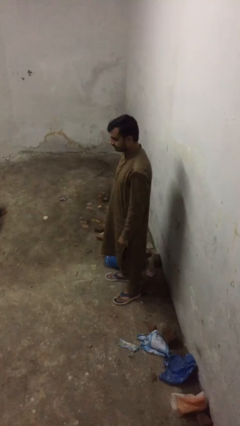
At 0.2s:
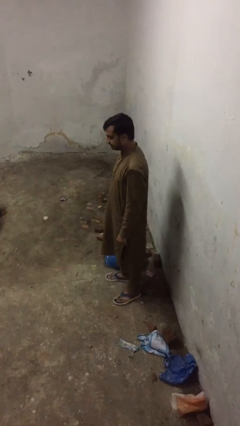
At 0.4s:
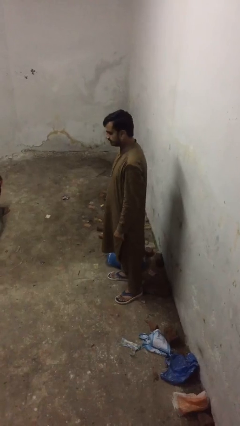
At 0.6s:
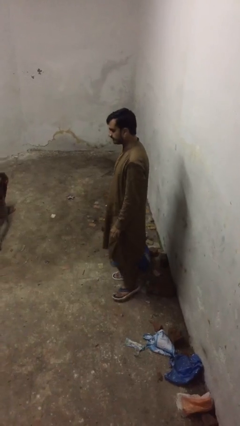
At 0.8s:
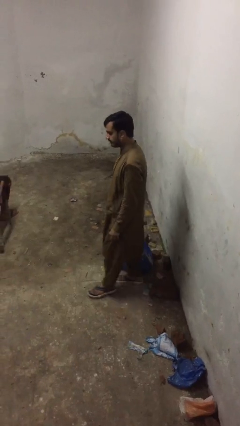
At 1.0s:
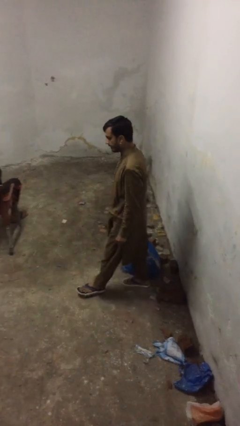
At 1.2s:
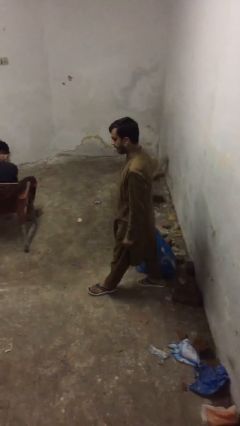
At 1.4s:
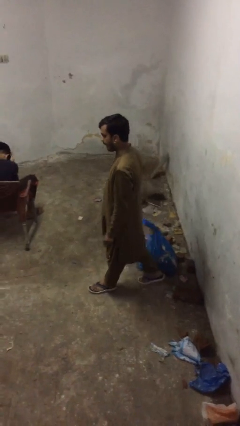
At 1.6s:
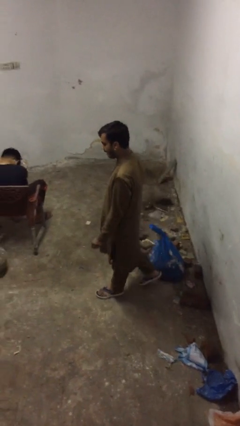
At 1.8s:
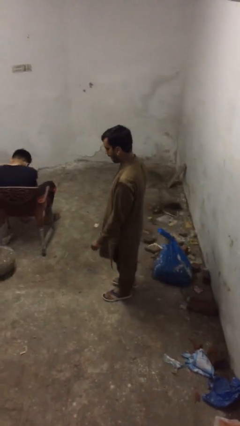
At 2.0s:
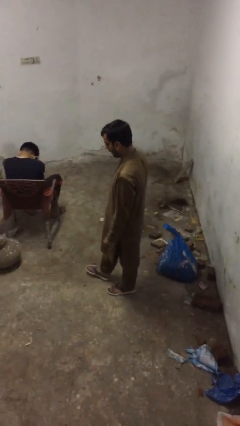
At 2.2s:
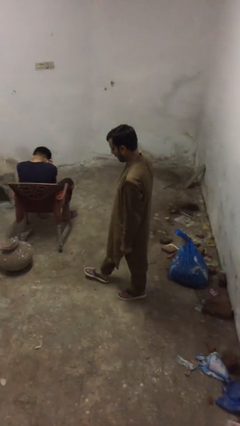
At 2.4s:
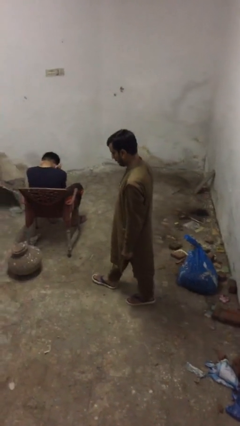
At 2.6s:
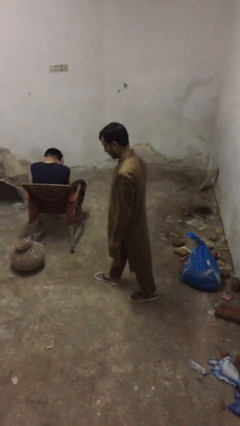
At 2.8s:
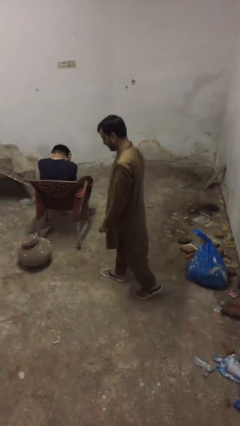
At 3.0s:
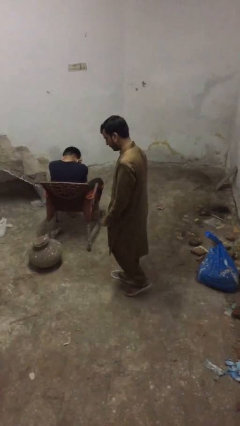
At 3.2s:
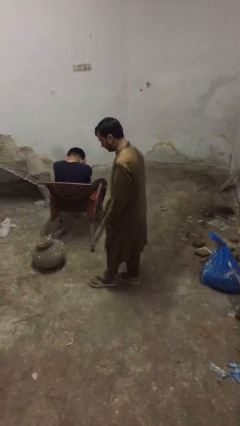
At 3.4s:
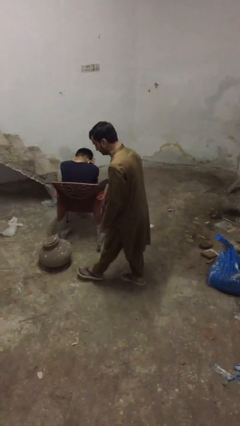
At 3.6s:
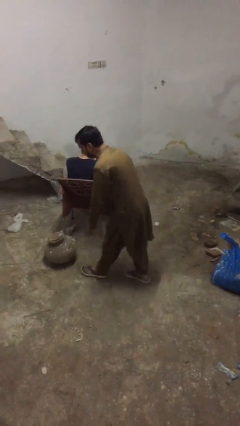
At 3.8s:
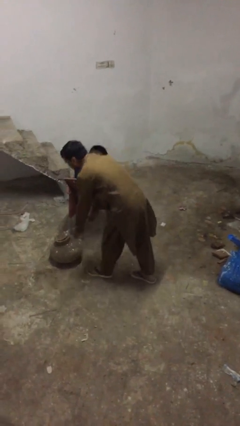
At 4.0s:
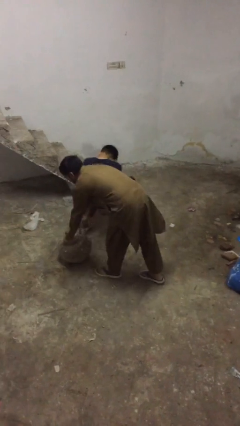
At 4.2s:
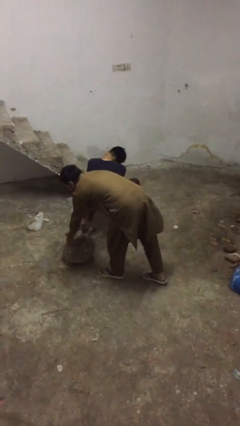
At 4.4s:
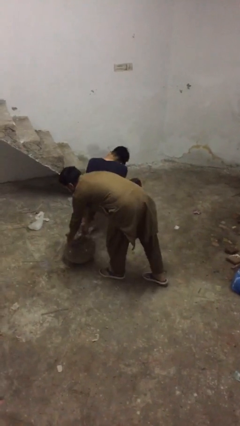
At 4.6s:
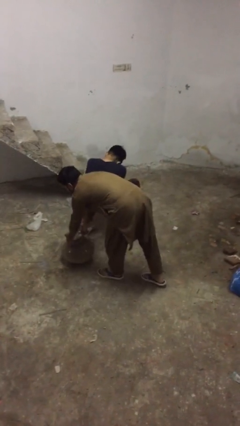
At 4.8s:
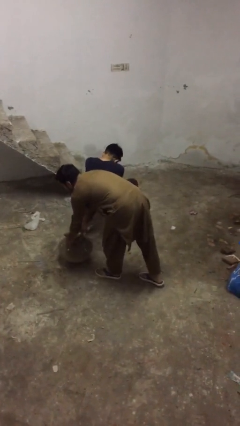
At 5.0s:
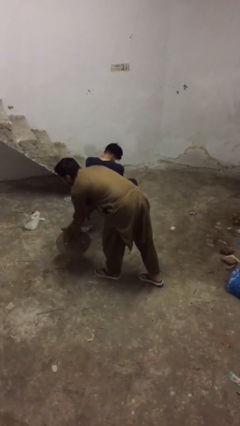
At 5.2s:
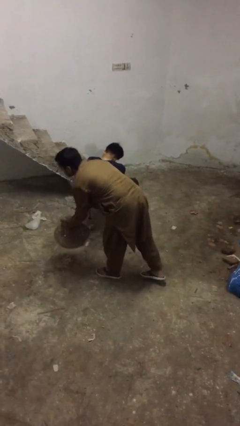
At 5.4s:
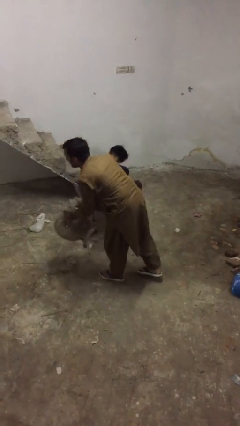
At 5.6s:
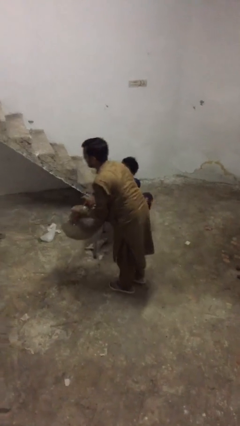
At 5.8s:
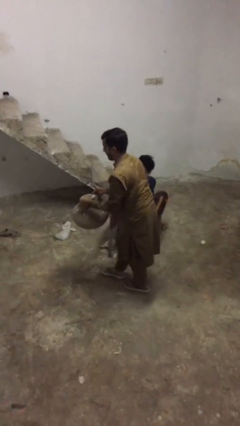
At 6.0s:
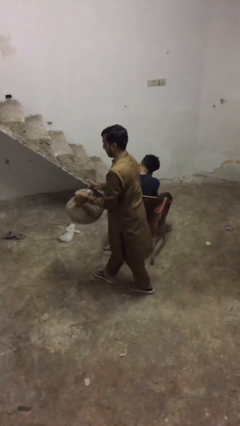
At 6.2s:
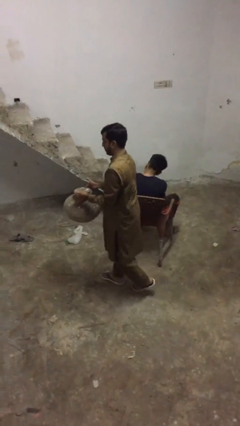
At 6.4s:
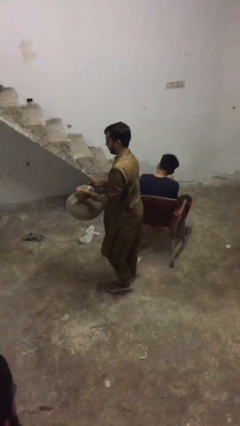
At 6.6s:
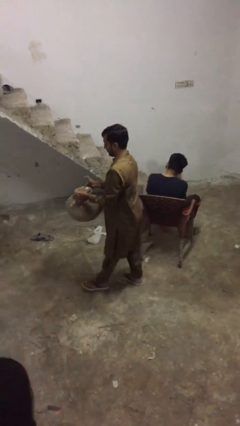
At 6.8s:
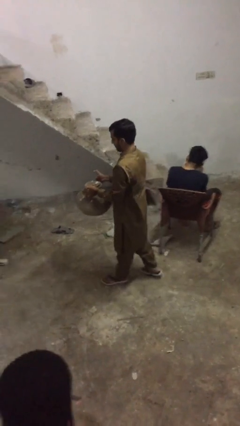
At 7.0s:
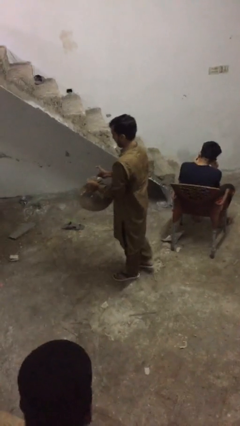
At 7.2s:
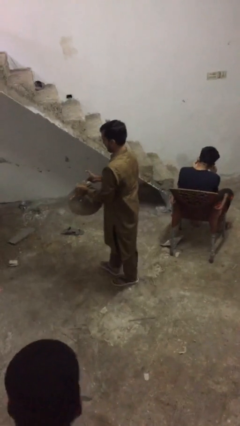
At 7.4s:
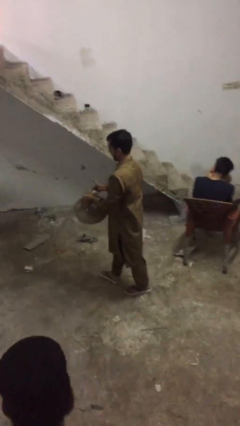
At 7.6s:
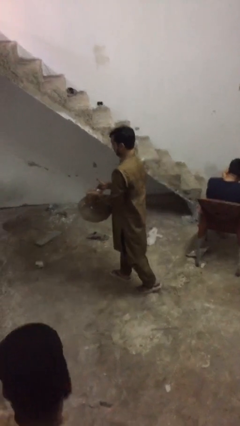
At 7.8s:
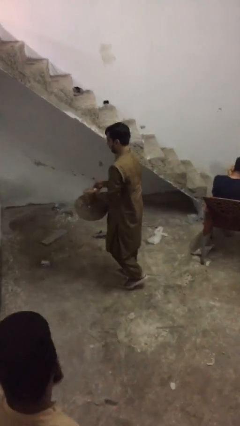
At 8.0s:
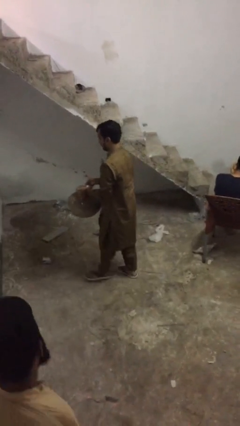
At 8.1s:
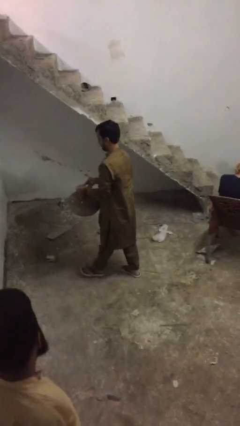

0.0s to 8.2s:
person steals object from person

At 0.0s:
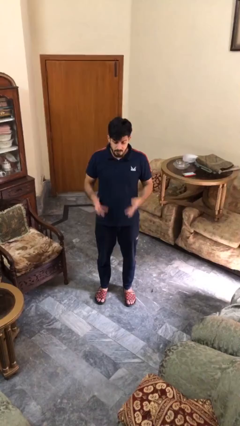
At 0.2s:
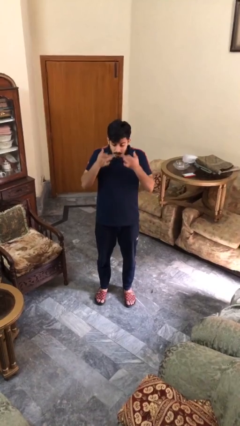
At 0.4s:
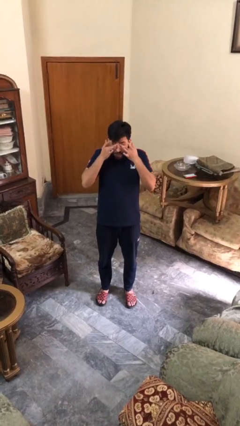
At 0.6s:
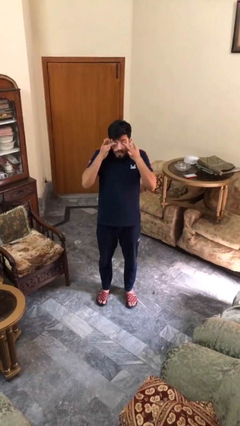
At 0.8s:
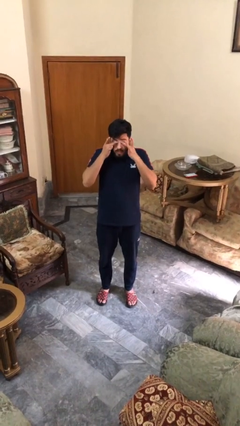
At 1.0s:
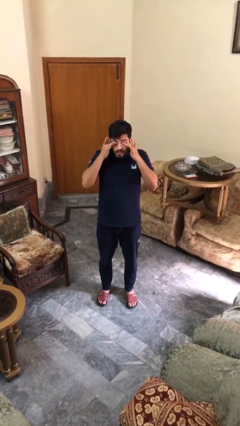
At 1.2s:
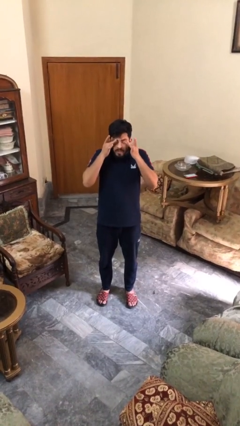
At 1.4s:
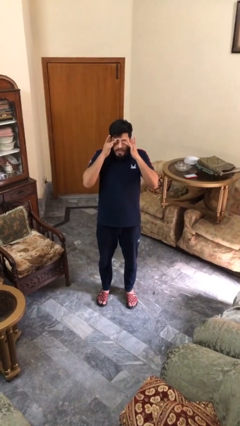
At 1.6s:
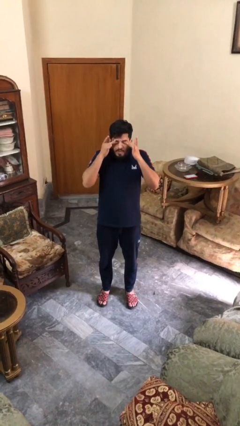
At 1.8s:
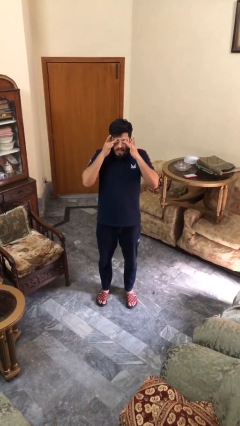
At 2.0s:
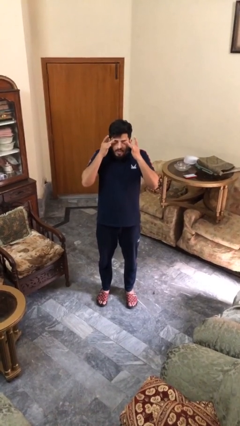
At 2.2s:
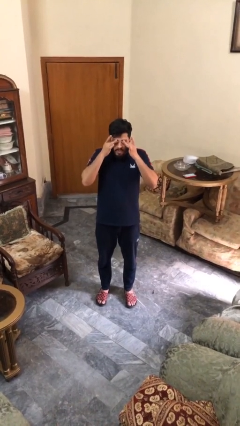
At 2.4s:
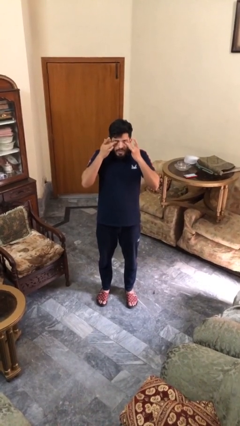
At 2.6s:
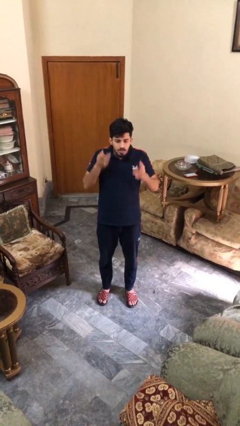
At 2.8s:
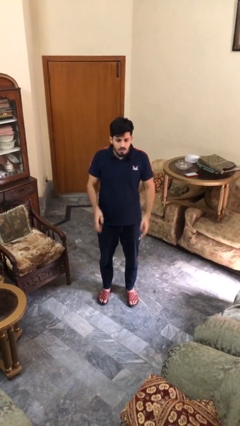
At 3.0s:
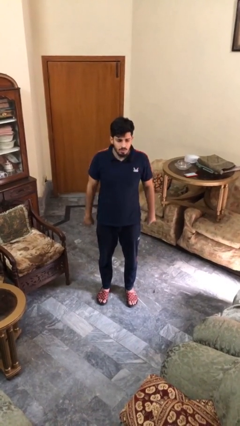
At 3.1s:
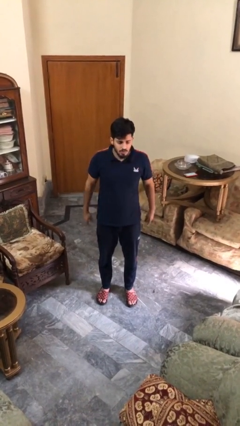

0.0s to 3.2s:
person rubs eyes

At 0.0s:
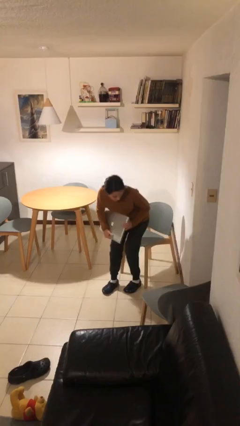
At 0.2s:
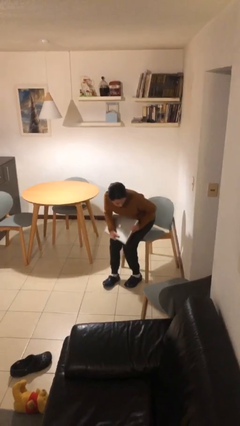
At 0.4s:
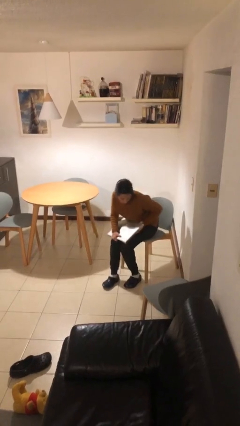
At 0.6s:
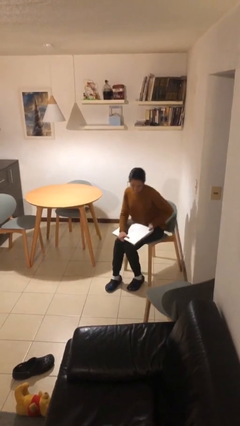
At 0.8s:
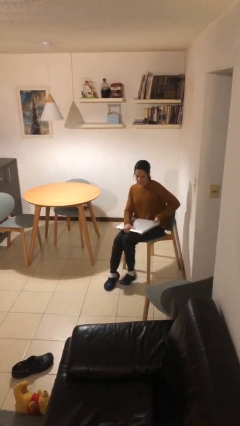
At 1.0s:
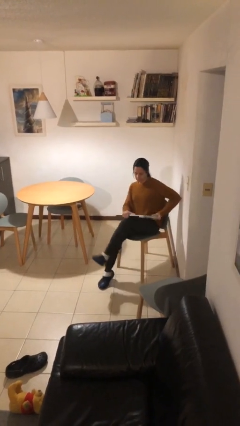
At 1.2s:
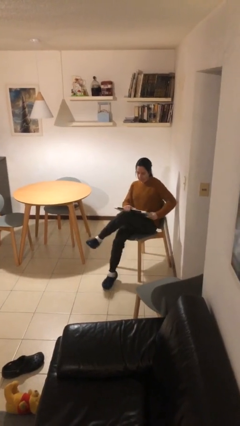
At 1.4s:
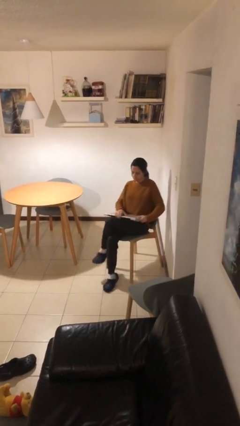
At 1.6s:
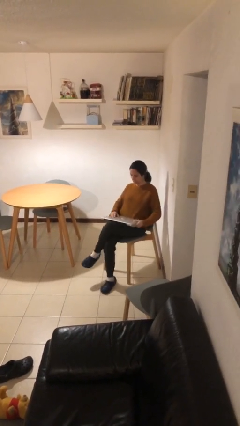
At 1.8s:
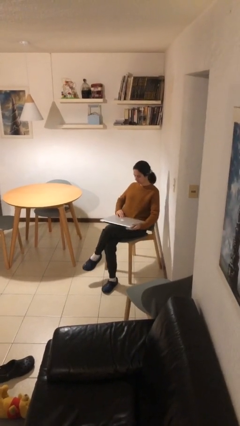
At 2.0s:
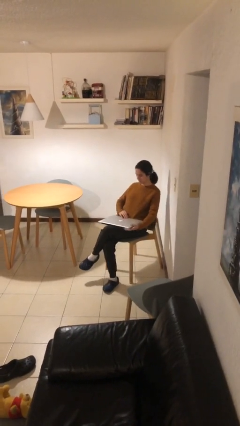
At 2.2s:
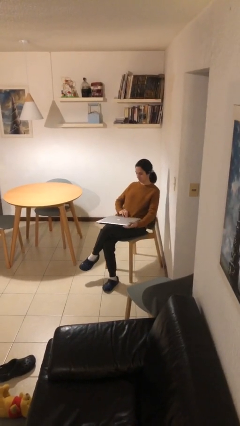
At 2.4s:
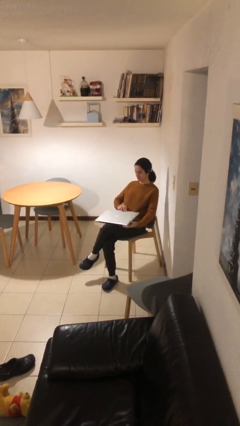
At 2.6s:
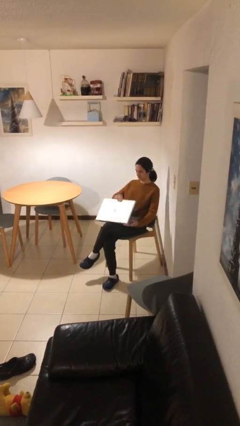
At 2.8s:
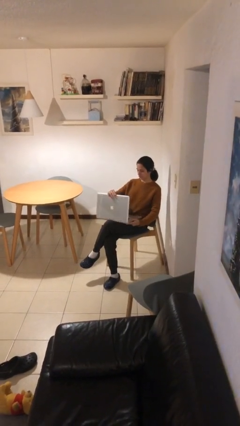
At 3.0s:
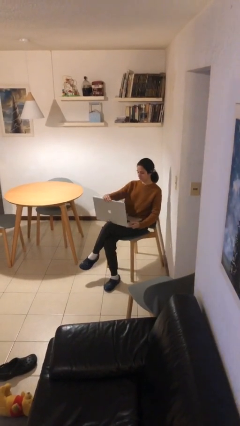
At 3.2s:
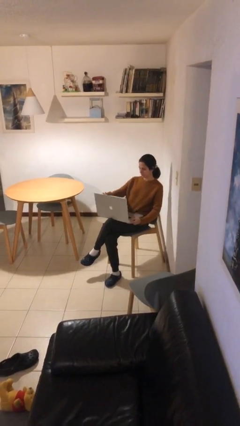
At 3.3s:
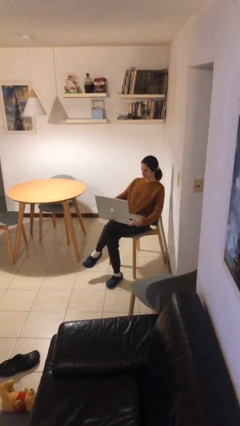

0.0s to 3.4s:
person sits down

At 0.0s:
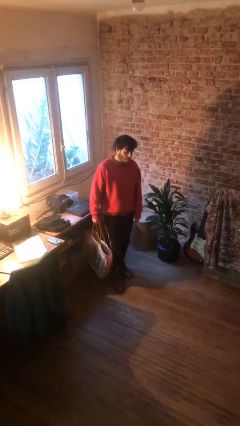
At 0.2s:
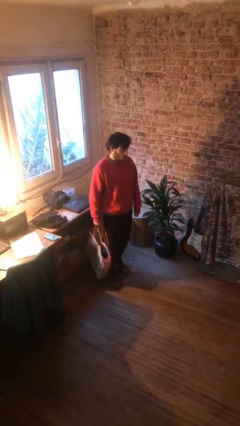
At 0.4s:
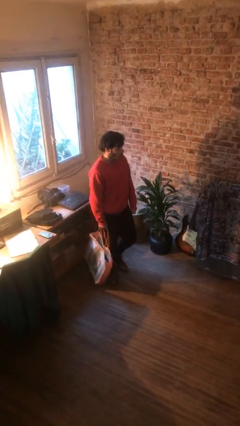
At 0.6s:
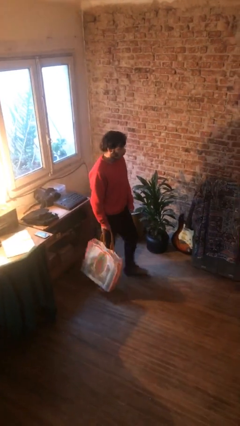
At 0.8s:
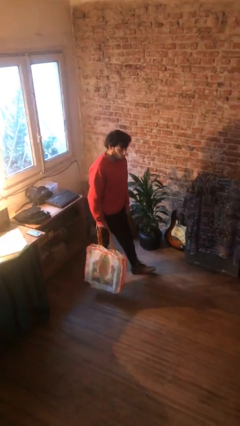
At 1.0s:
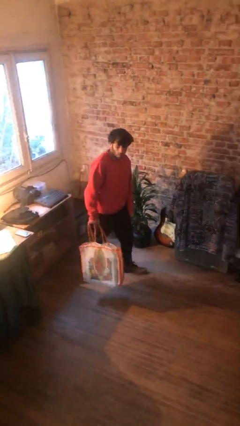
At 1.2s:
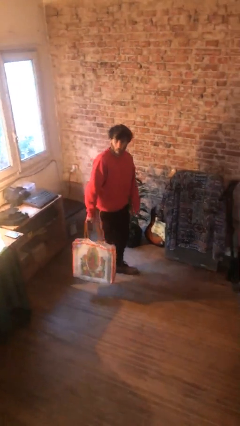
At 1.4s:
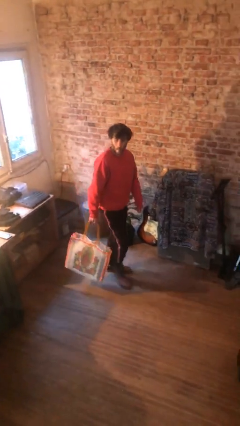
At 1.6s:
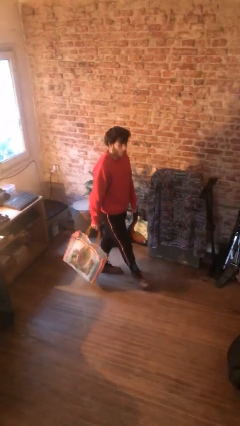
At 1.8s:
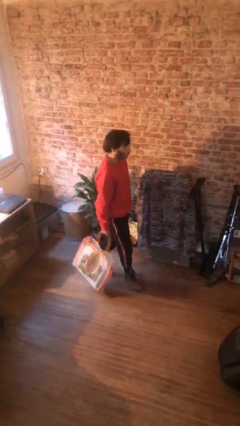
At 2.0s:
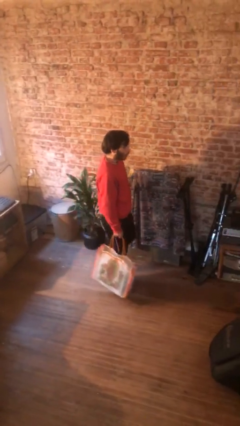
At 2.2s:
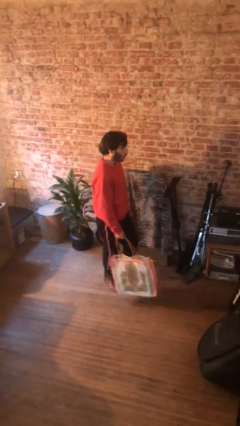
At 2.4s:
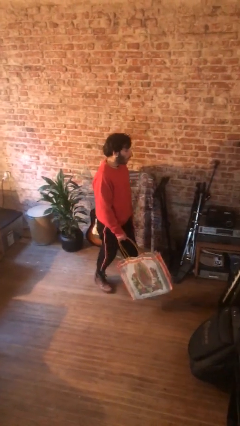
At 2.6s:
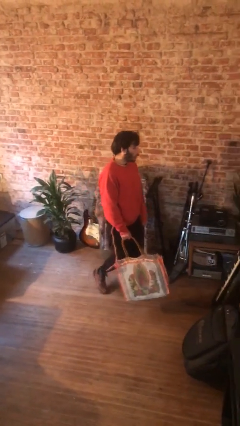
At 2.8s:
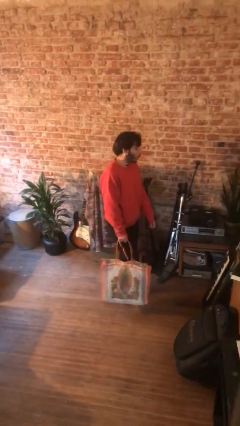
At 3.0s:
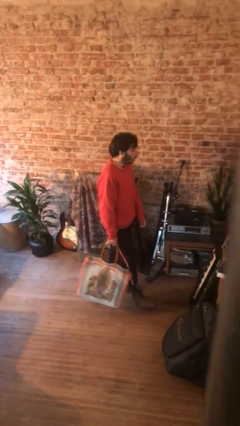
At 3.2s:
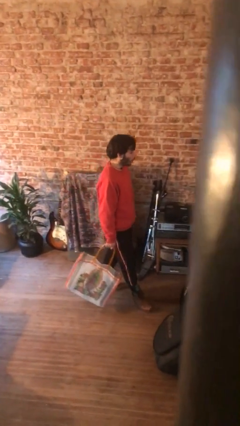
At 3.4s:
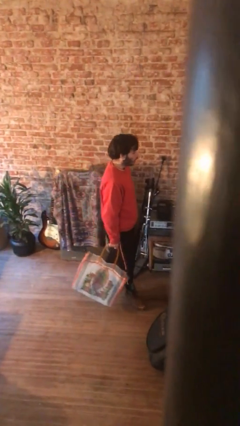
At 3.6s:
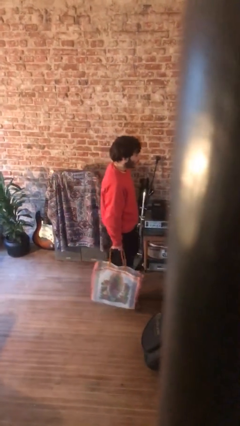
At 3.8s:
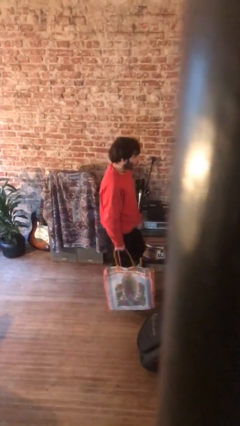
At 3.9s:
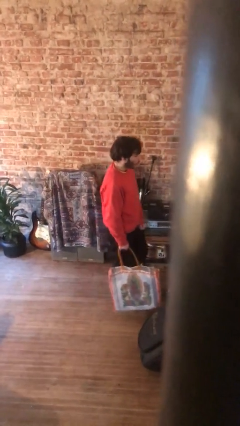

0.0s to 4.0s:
person carries groceries
